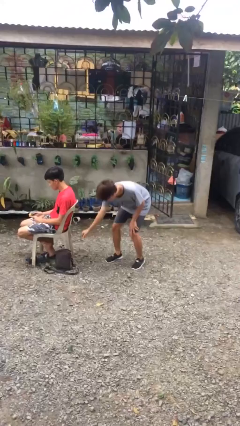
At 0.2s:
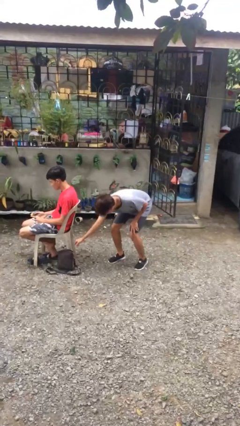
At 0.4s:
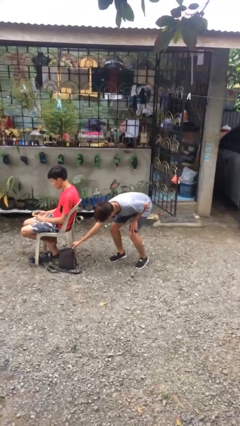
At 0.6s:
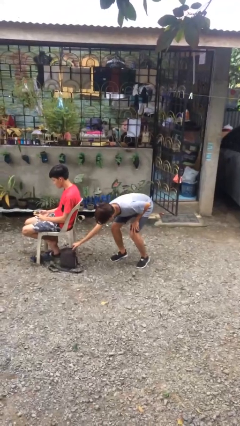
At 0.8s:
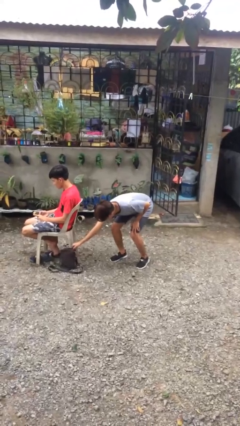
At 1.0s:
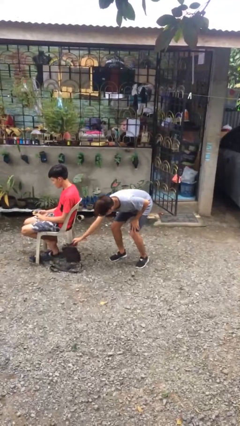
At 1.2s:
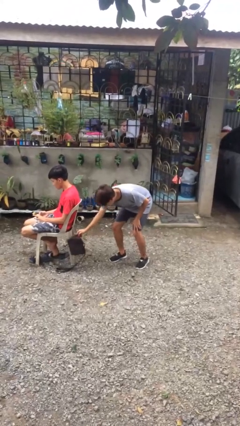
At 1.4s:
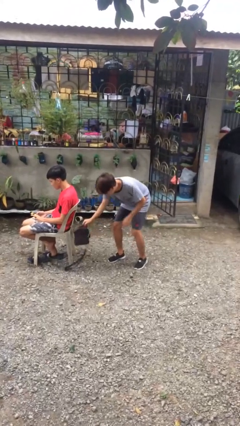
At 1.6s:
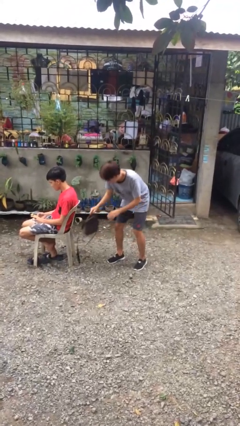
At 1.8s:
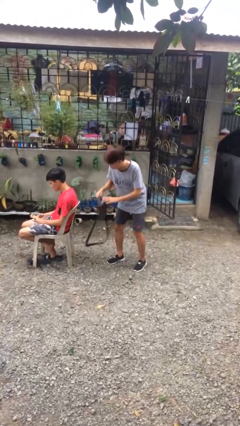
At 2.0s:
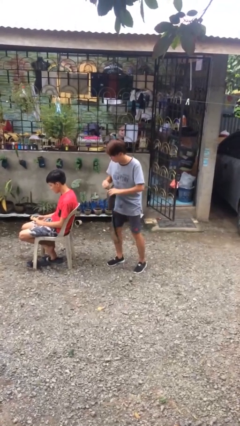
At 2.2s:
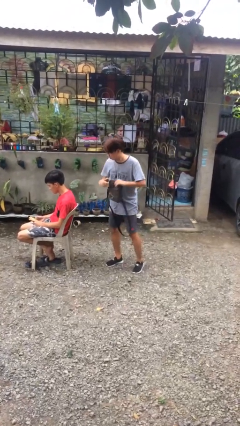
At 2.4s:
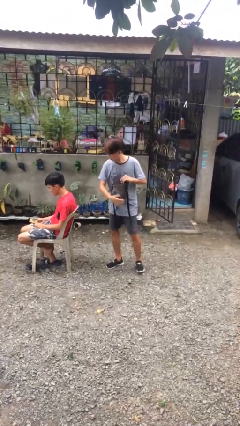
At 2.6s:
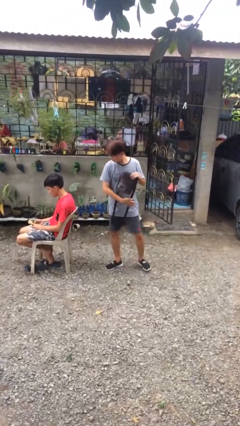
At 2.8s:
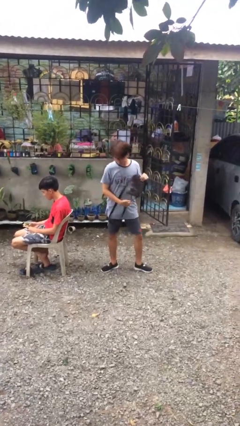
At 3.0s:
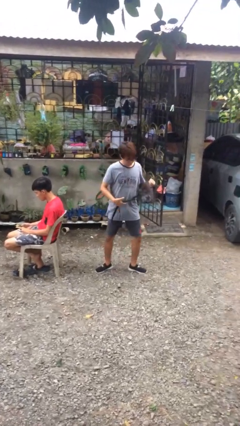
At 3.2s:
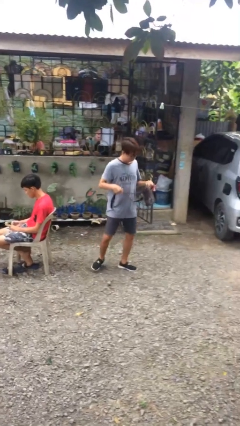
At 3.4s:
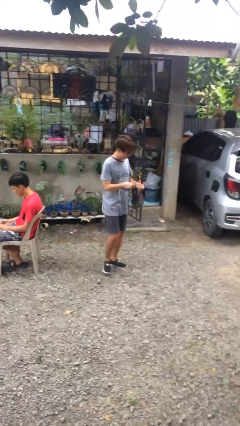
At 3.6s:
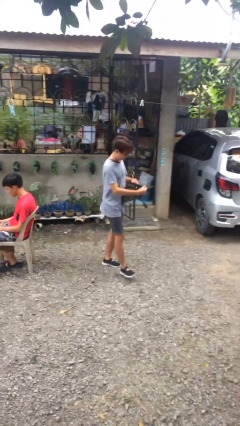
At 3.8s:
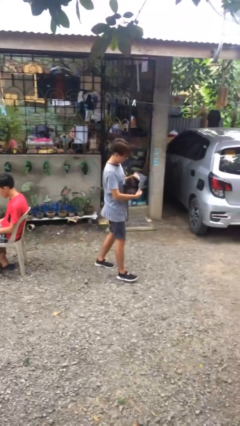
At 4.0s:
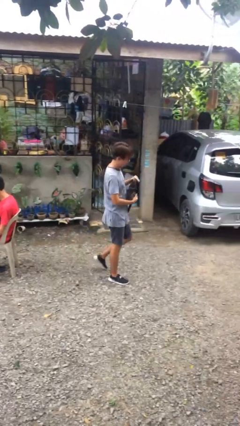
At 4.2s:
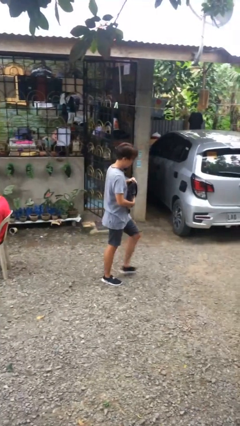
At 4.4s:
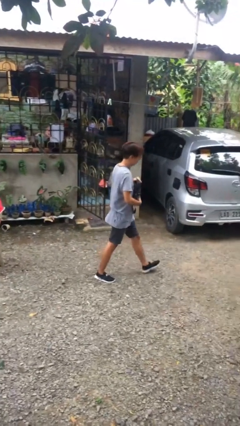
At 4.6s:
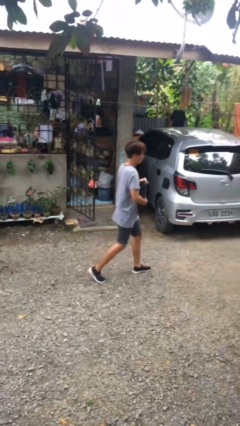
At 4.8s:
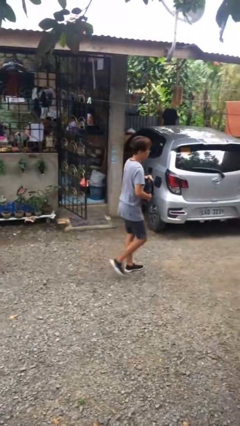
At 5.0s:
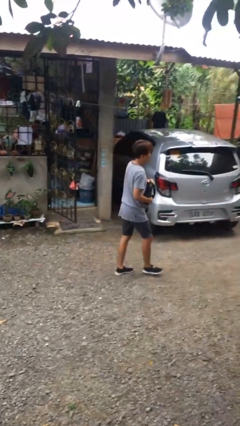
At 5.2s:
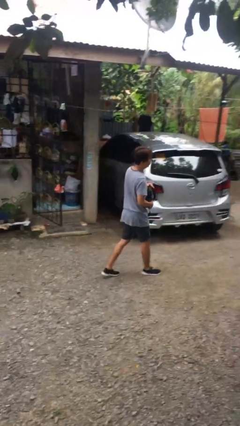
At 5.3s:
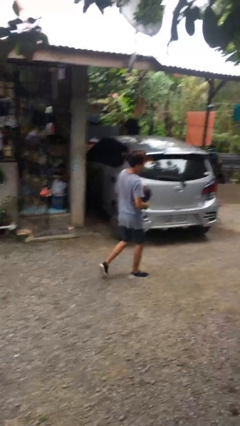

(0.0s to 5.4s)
person steals object from person

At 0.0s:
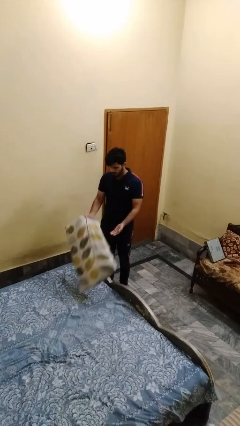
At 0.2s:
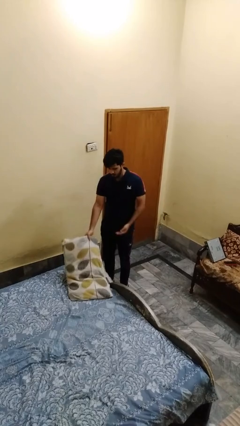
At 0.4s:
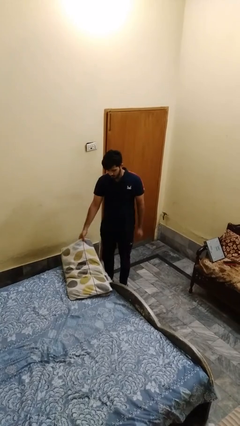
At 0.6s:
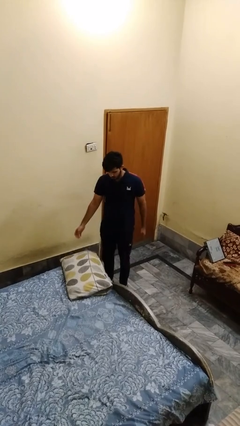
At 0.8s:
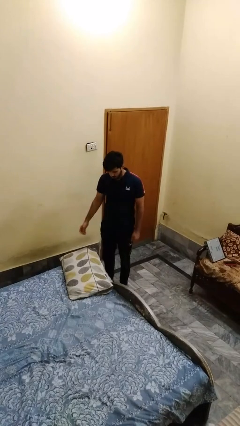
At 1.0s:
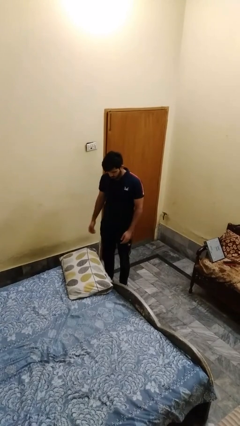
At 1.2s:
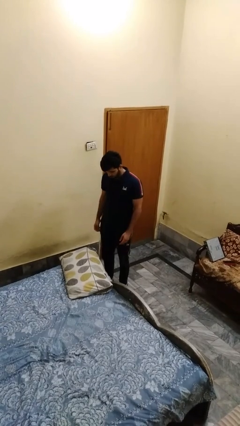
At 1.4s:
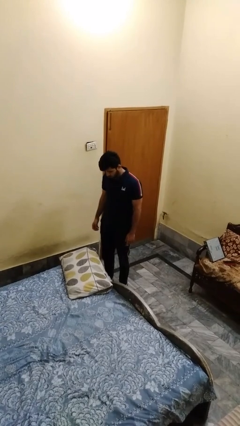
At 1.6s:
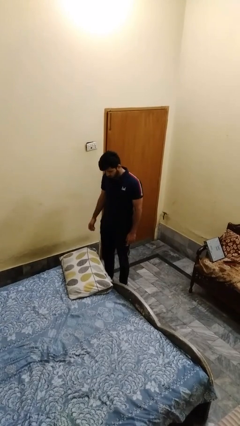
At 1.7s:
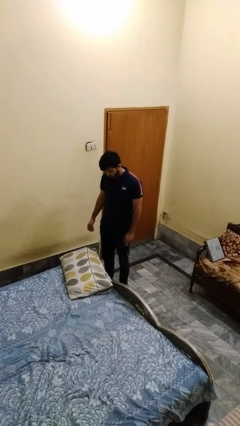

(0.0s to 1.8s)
person puts down object on bed

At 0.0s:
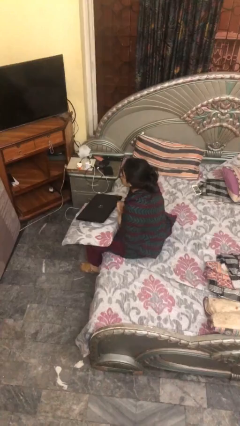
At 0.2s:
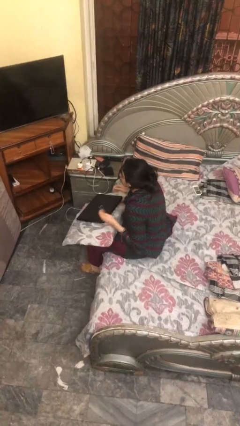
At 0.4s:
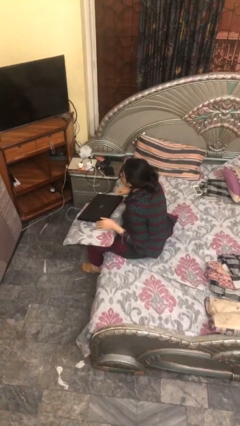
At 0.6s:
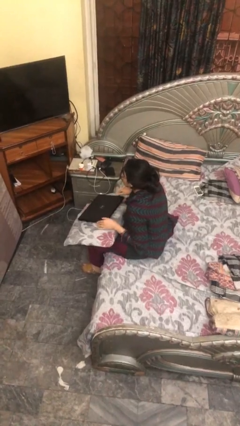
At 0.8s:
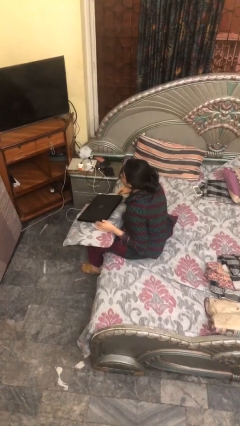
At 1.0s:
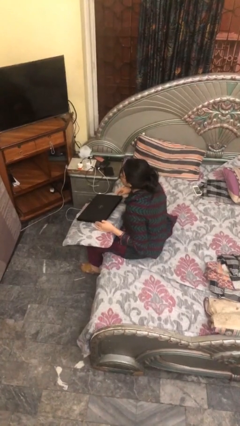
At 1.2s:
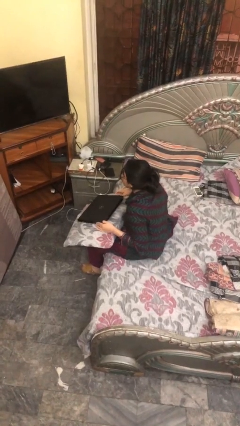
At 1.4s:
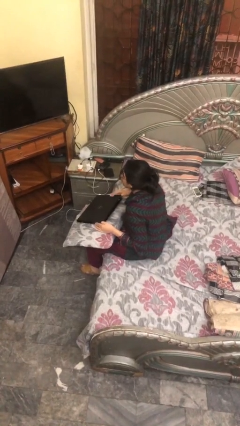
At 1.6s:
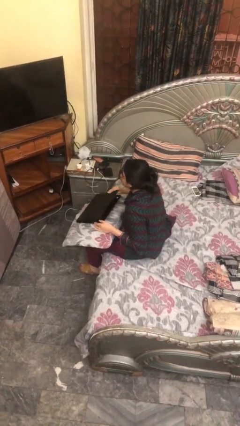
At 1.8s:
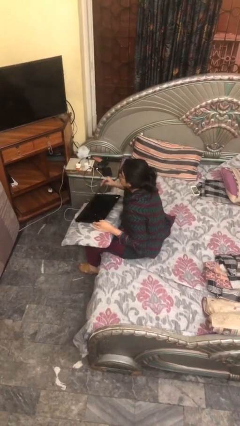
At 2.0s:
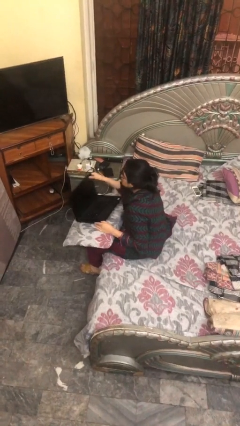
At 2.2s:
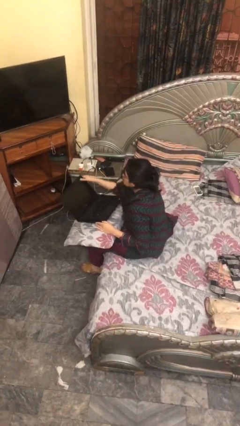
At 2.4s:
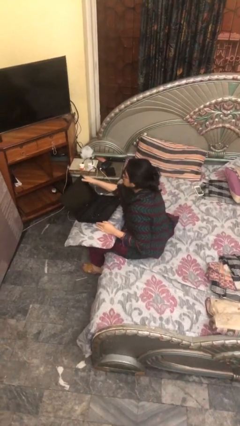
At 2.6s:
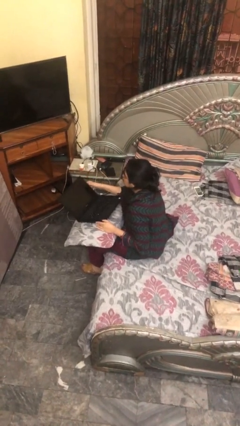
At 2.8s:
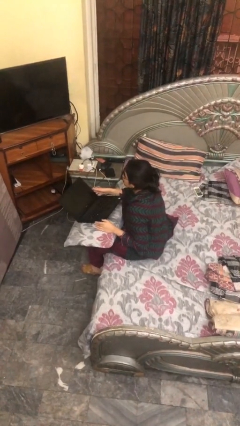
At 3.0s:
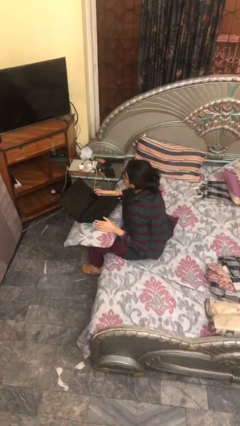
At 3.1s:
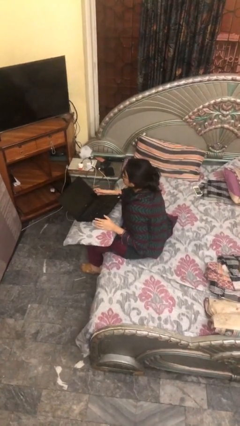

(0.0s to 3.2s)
person opens laptop

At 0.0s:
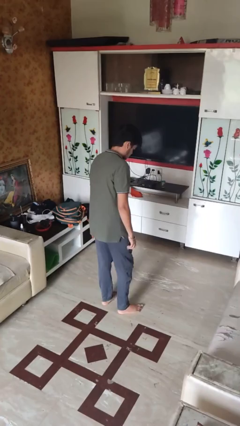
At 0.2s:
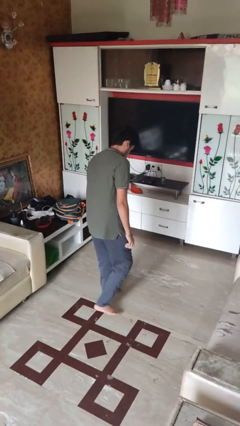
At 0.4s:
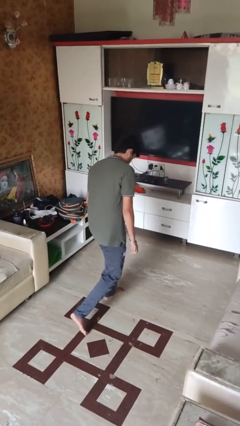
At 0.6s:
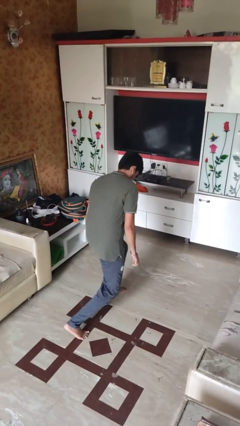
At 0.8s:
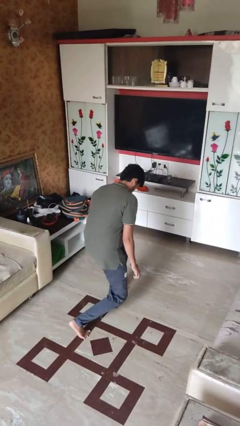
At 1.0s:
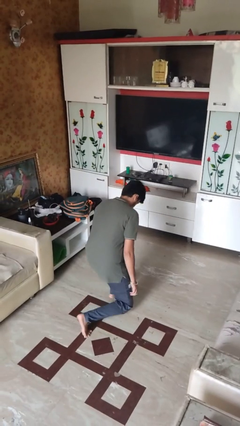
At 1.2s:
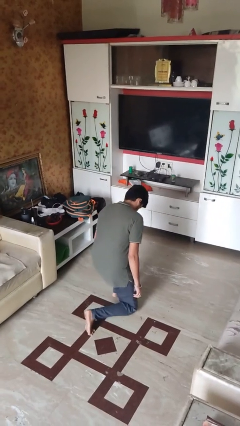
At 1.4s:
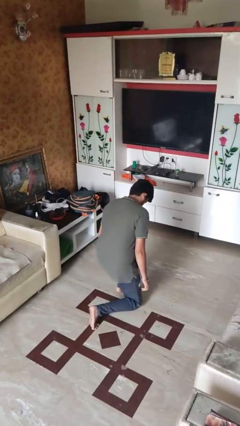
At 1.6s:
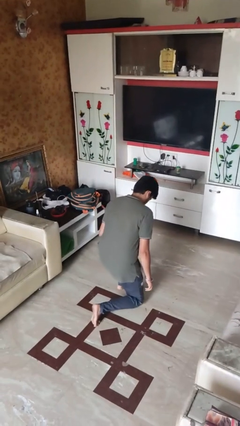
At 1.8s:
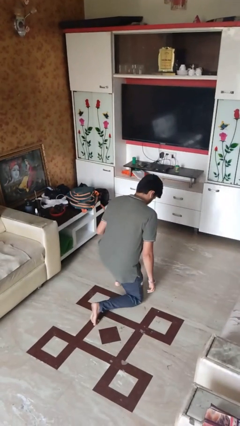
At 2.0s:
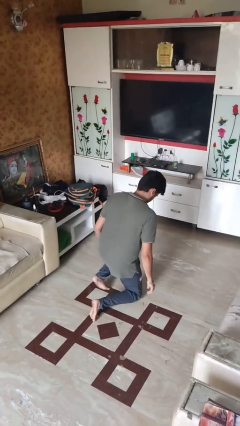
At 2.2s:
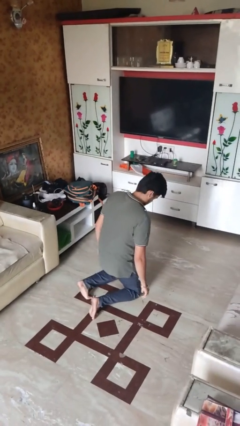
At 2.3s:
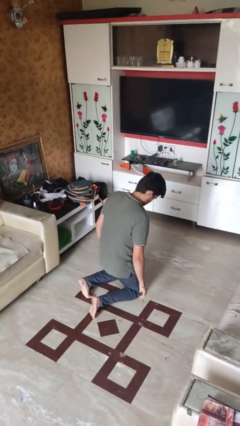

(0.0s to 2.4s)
person kneels

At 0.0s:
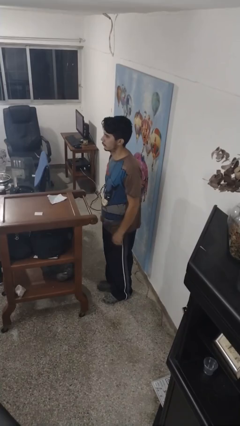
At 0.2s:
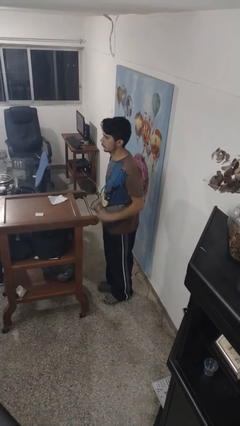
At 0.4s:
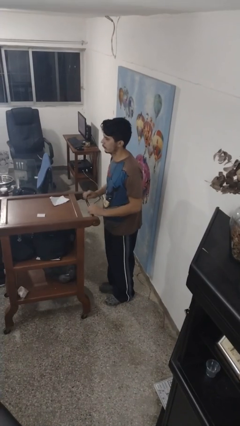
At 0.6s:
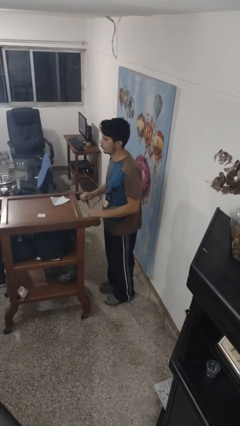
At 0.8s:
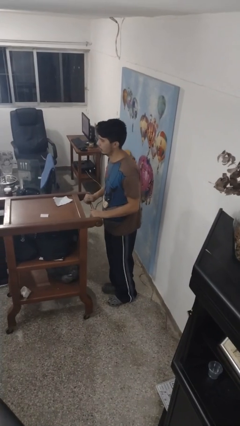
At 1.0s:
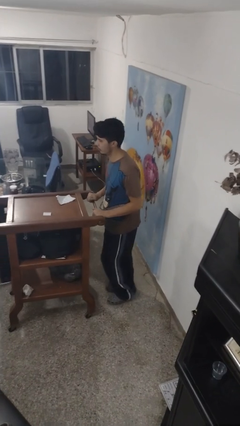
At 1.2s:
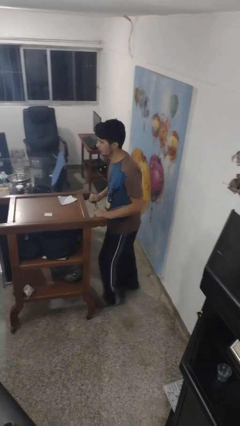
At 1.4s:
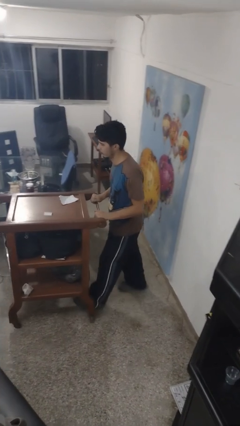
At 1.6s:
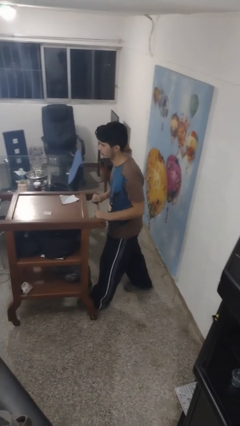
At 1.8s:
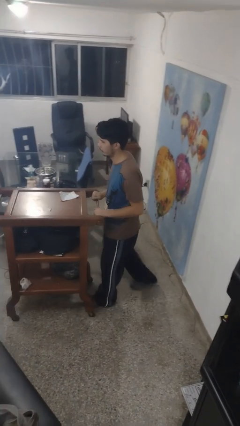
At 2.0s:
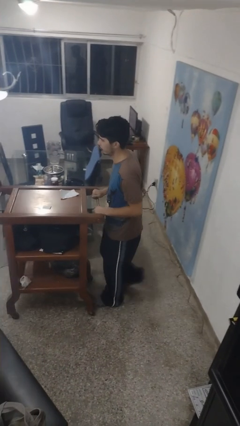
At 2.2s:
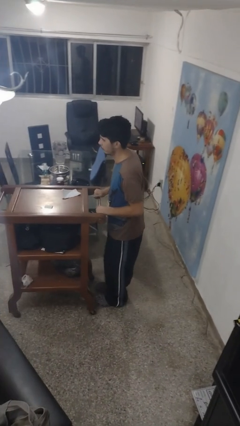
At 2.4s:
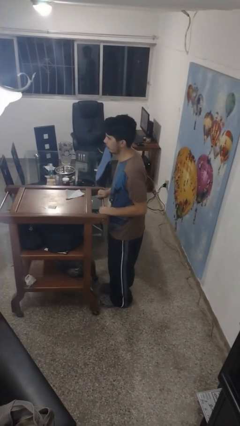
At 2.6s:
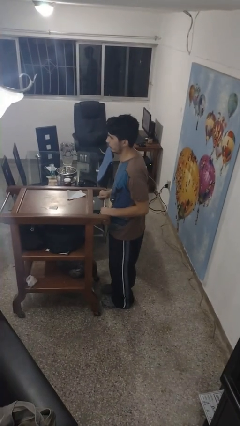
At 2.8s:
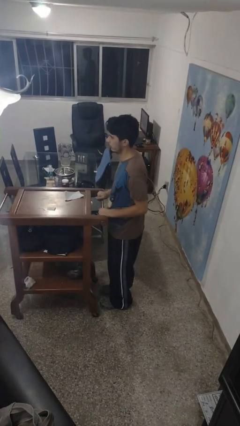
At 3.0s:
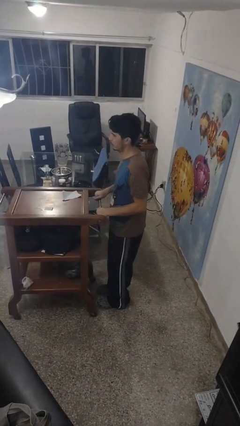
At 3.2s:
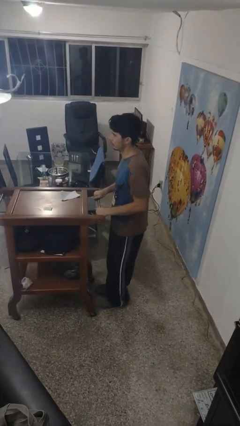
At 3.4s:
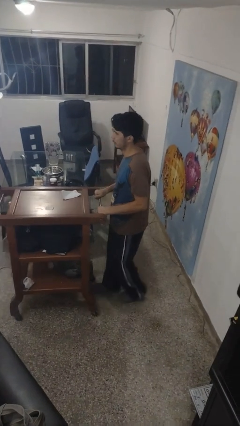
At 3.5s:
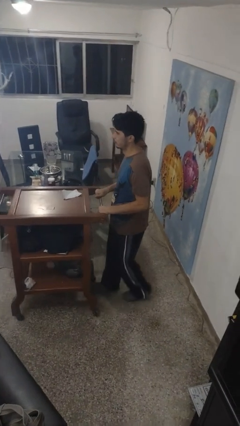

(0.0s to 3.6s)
person pushes wheeled cart

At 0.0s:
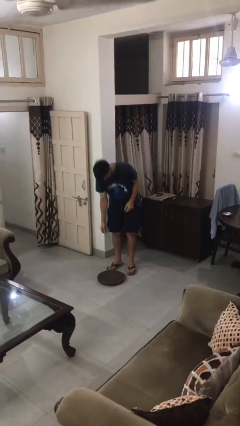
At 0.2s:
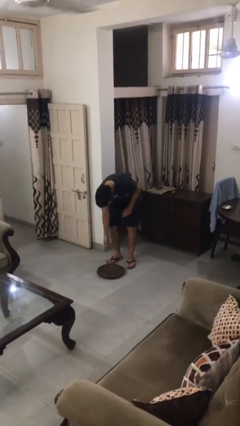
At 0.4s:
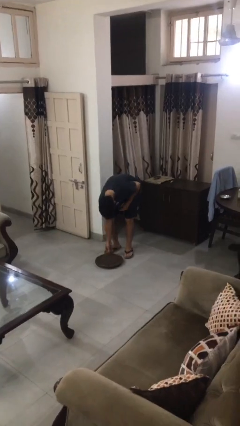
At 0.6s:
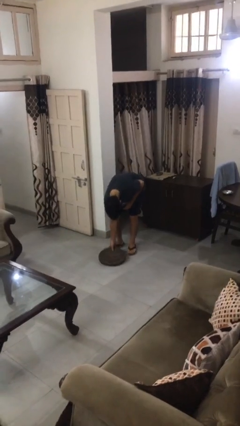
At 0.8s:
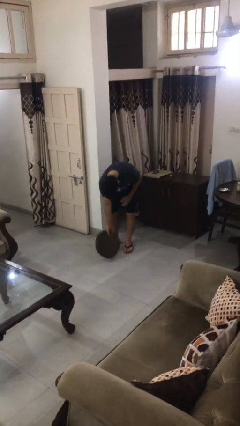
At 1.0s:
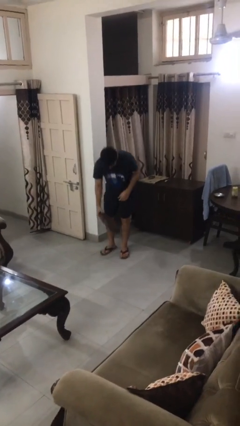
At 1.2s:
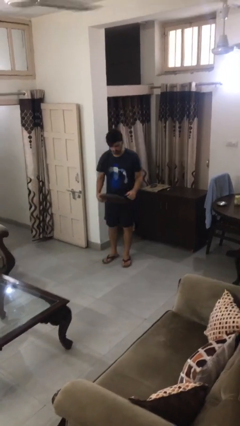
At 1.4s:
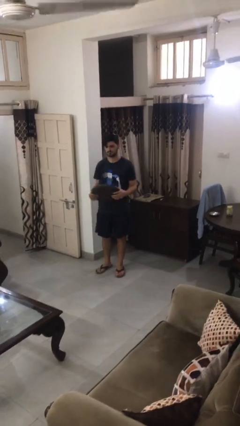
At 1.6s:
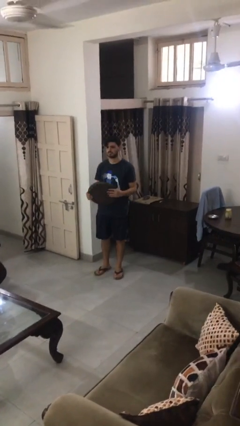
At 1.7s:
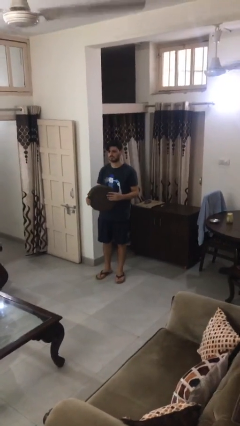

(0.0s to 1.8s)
person picks up object from floor
